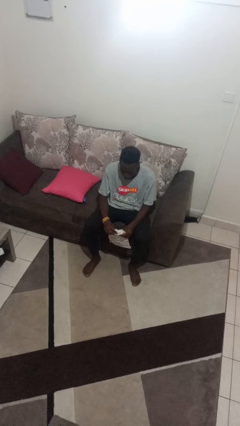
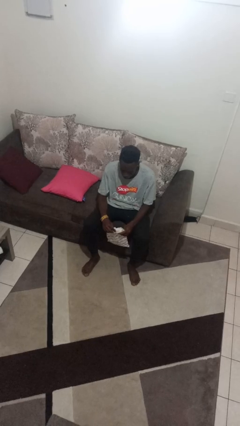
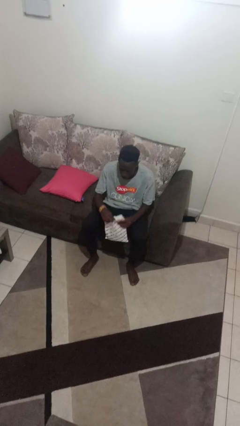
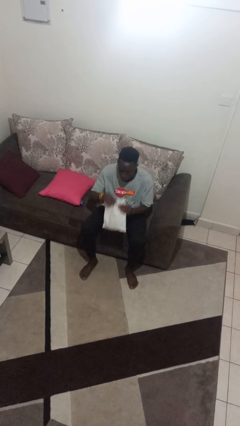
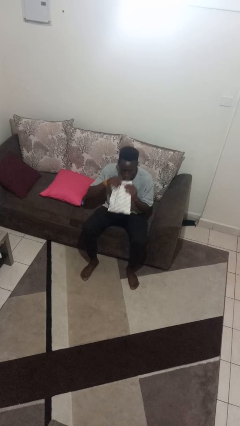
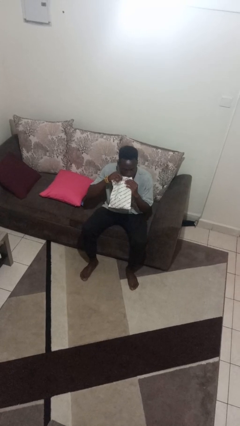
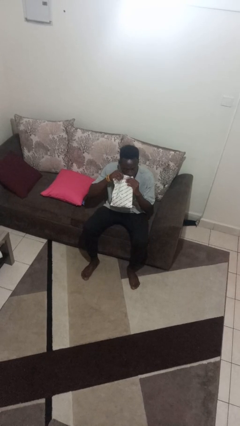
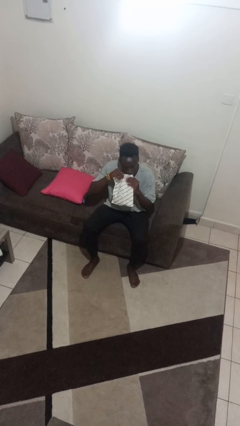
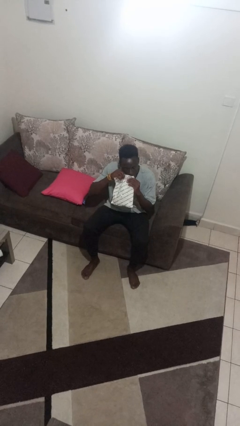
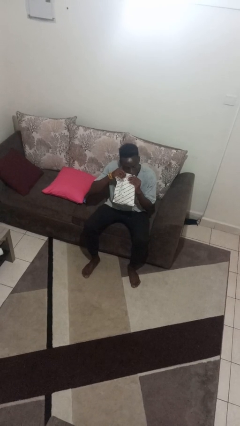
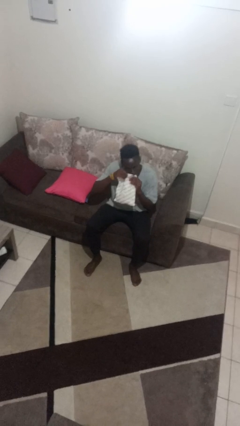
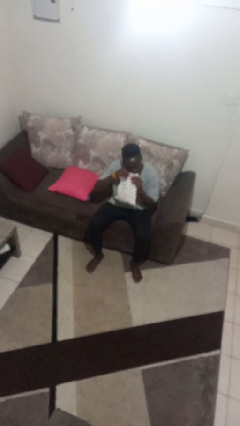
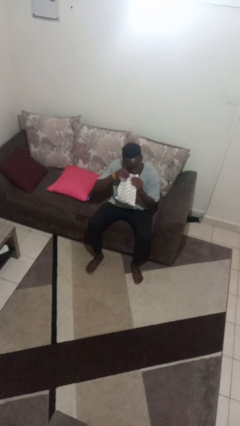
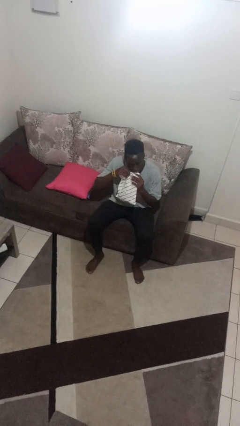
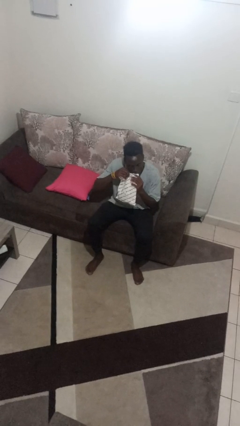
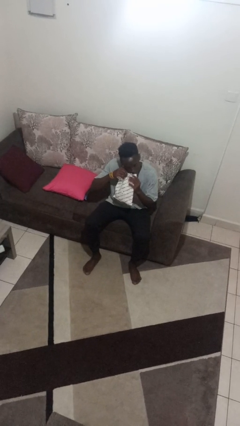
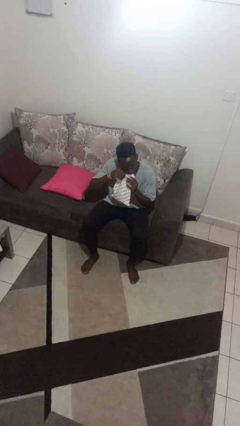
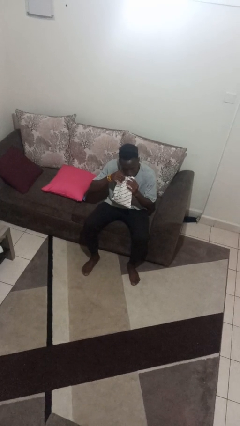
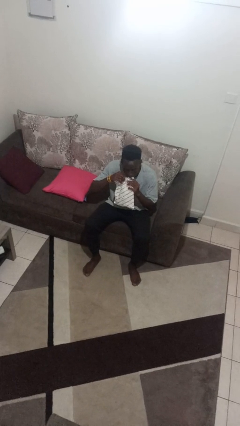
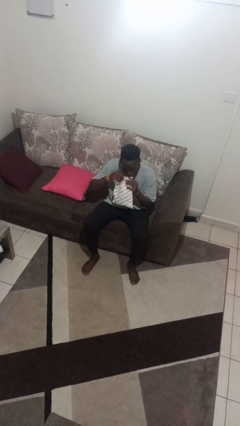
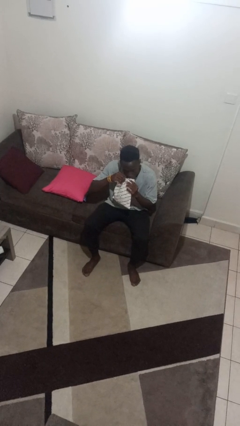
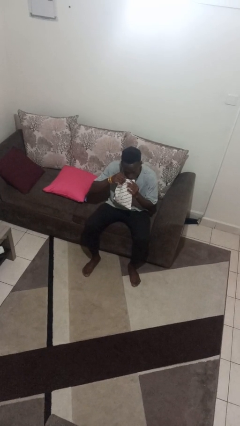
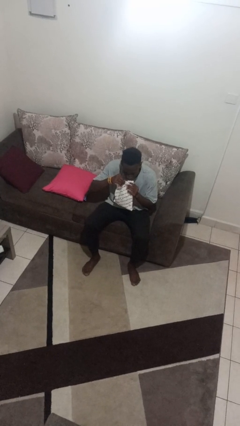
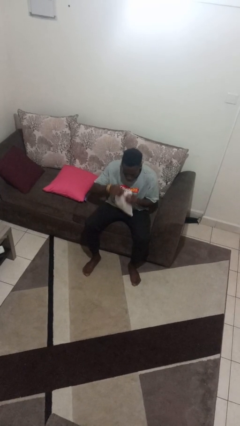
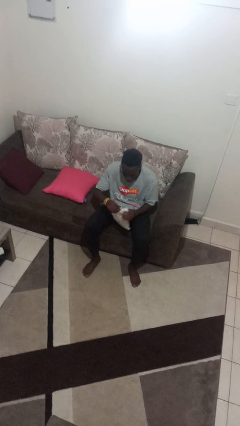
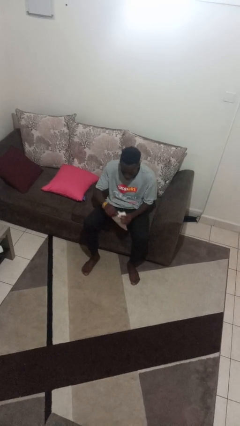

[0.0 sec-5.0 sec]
person eats snack from bag

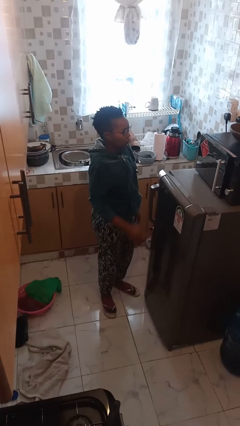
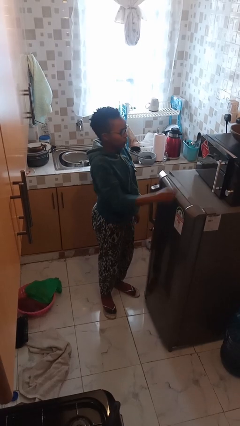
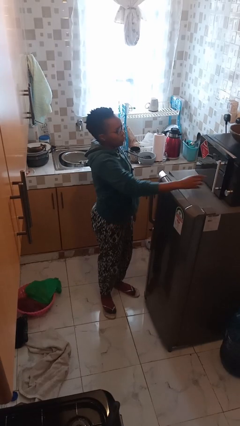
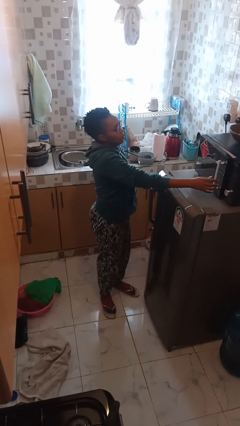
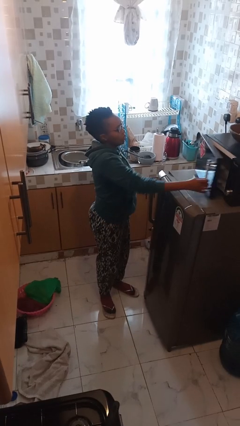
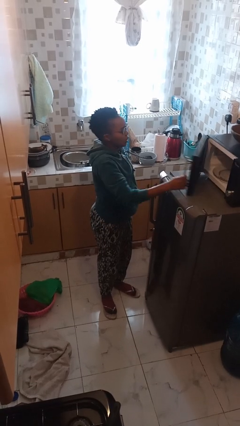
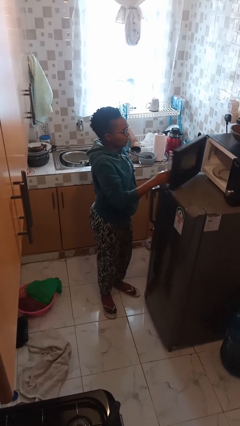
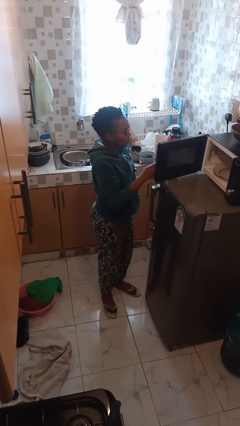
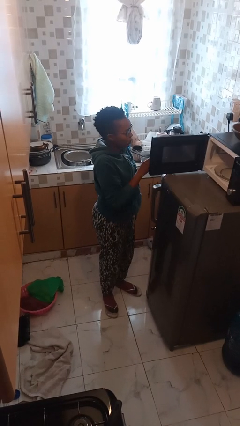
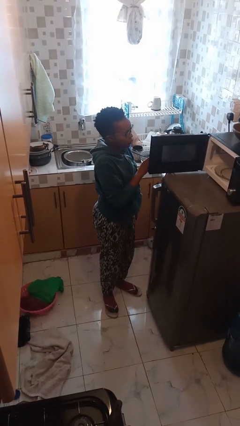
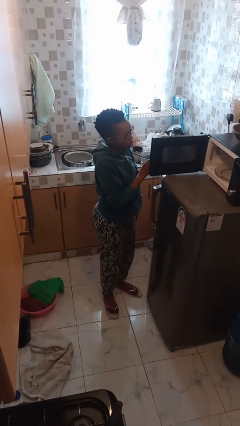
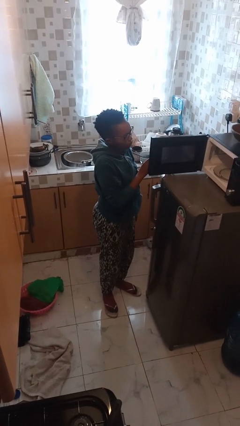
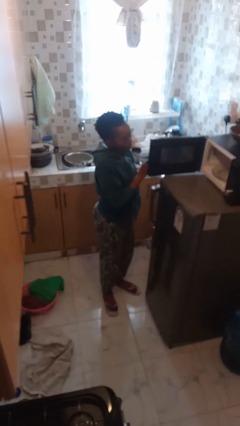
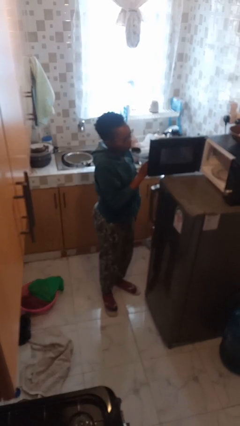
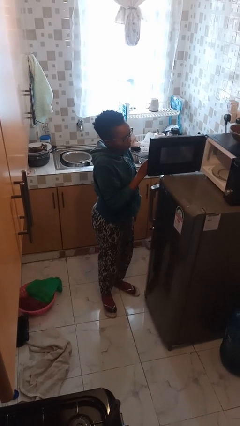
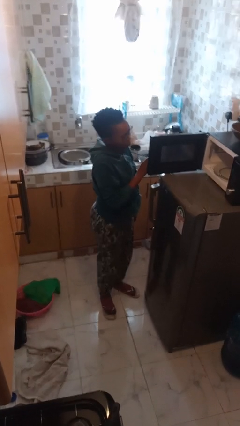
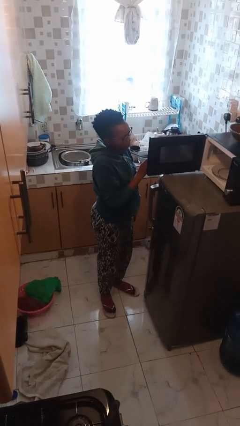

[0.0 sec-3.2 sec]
person opens microwave

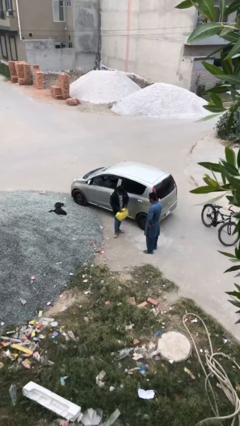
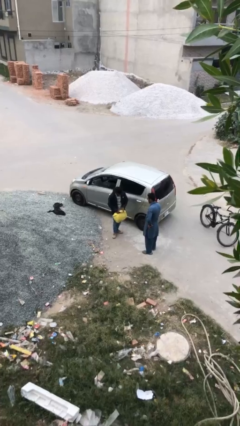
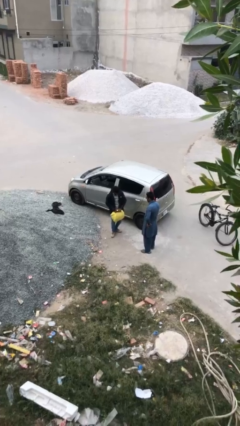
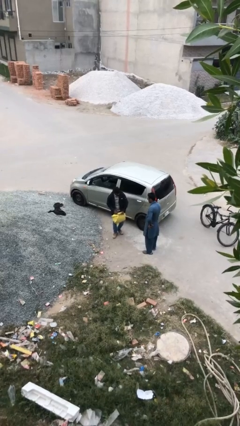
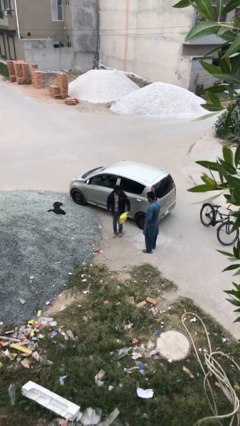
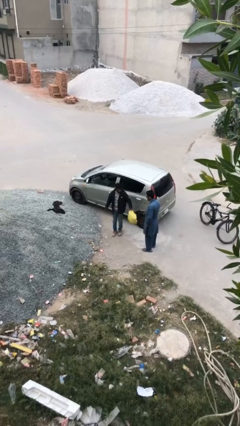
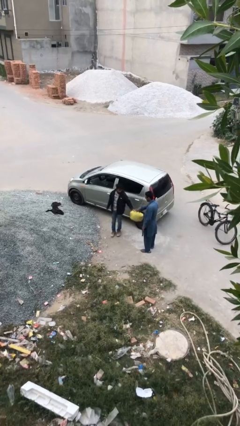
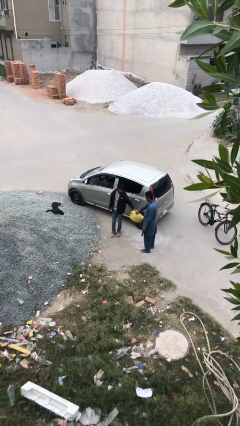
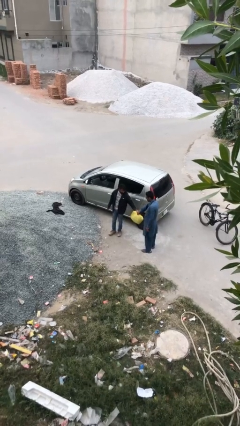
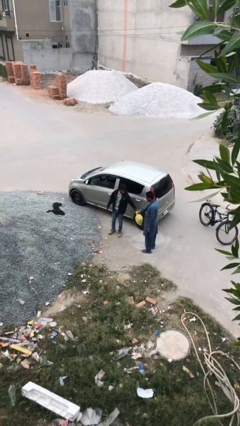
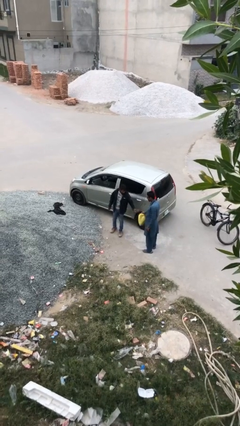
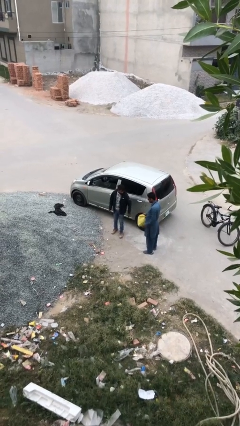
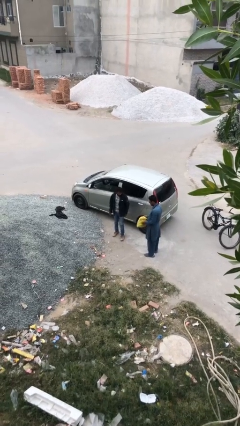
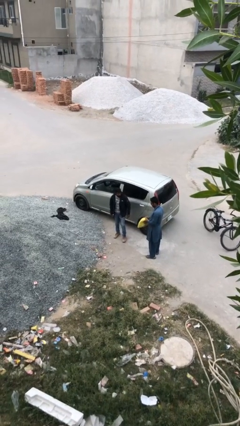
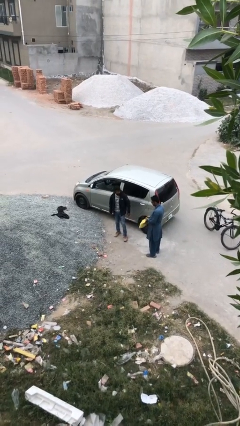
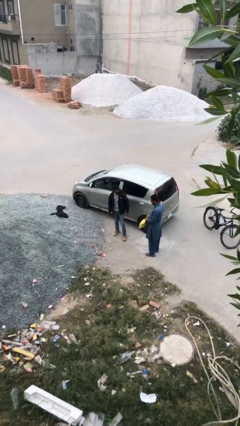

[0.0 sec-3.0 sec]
person transfers object to person

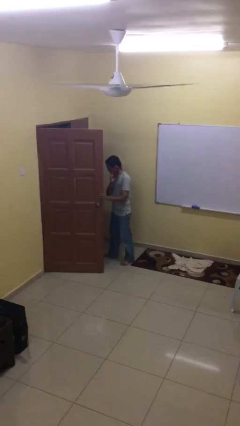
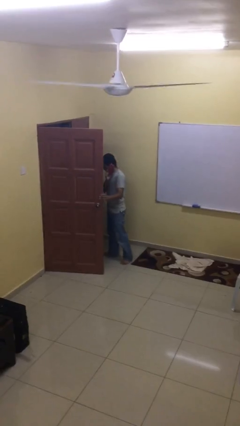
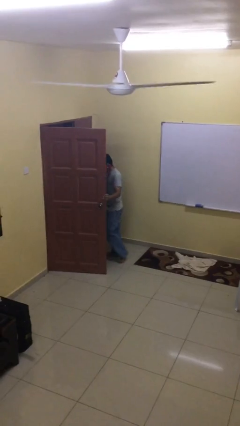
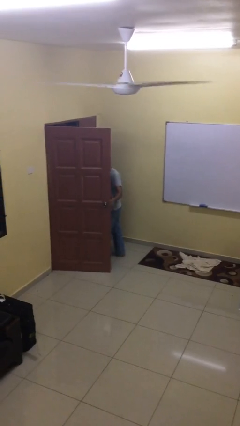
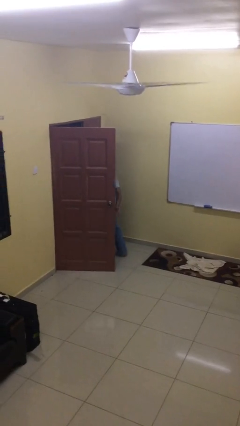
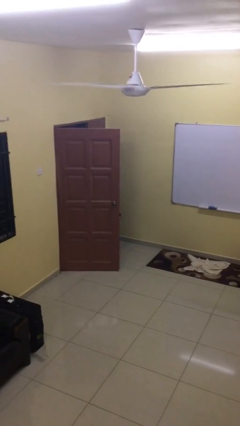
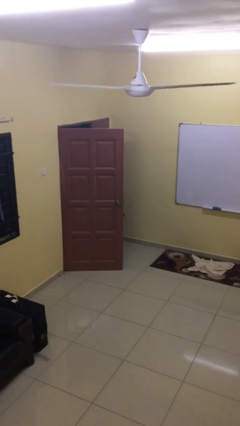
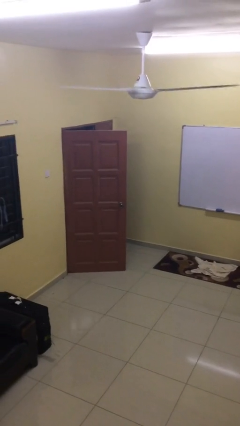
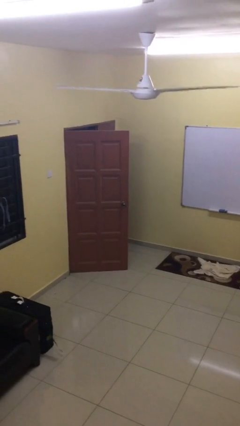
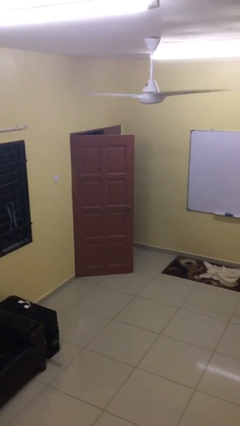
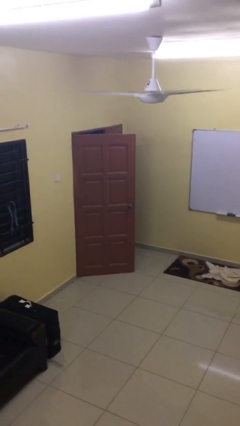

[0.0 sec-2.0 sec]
person exits scene through structure

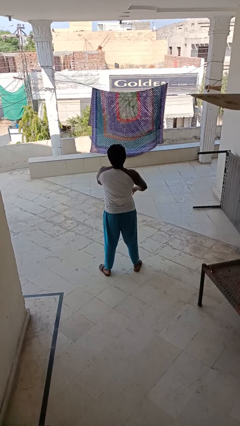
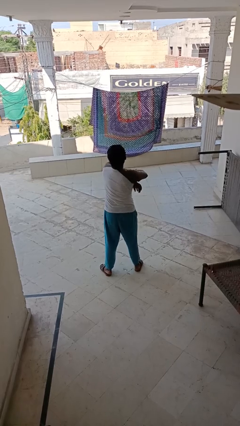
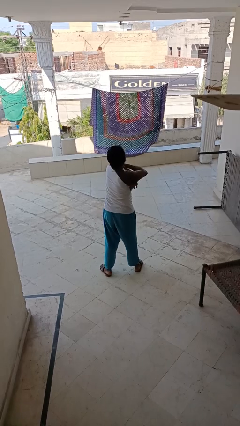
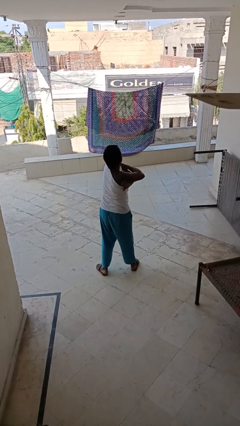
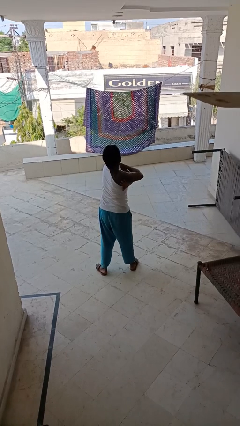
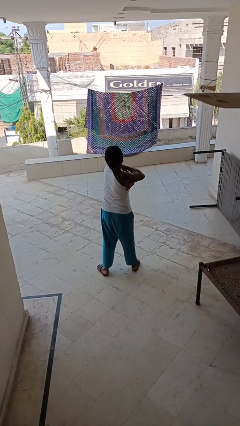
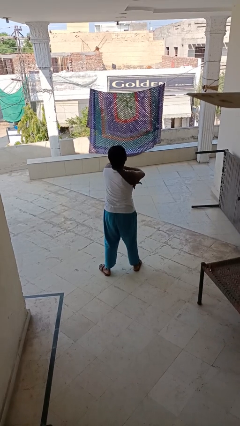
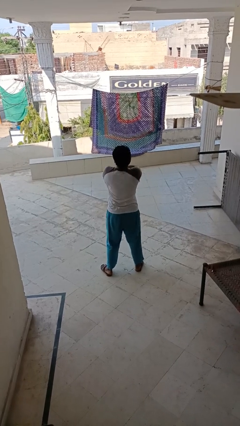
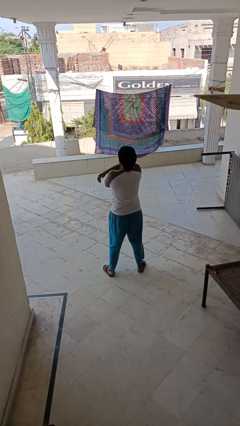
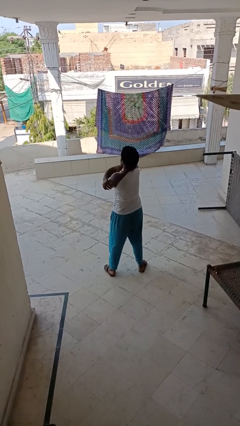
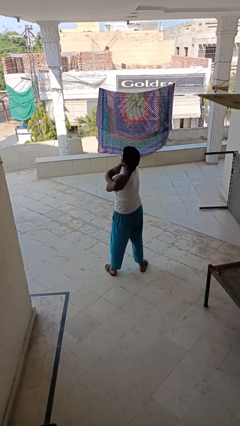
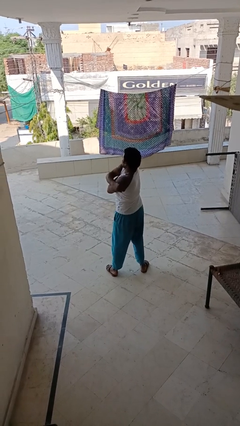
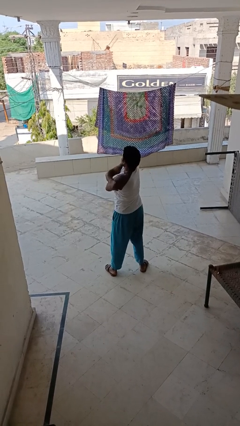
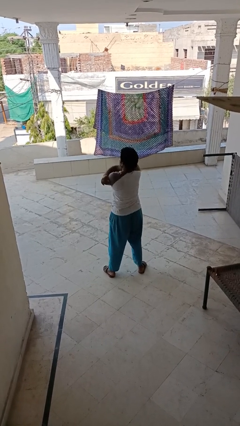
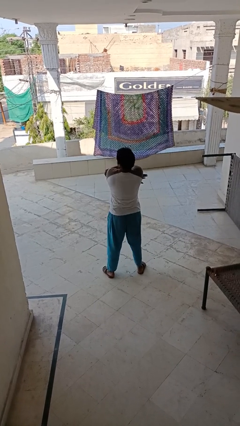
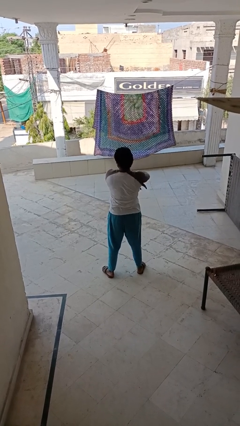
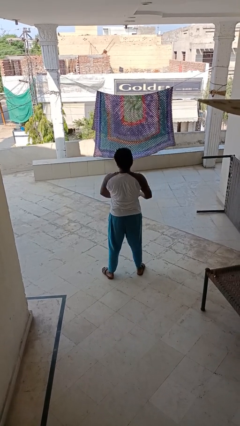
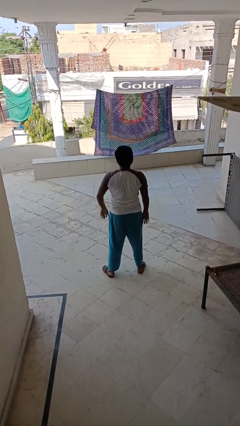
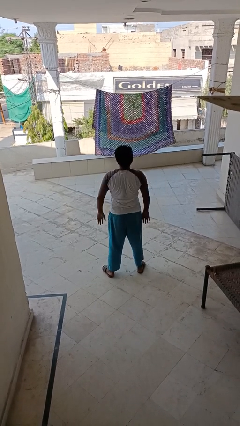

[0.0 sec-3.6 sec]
person stretches arms to side

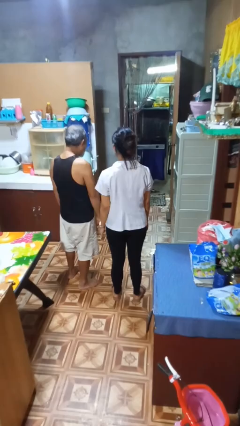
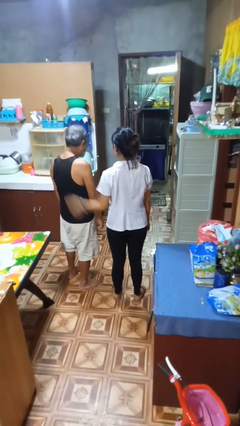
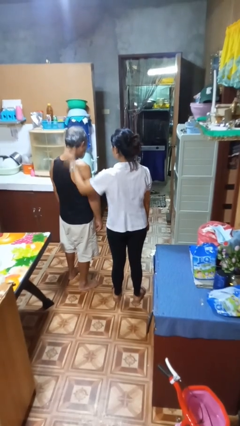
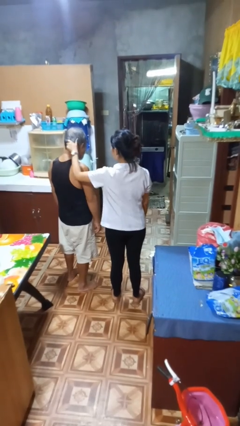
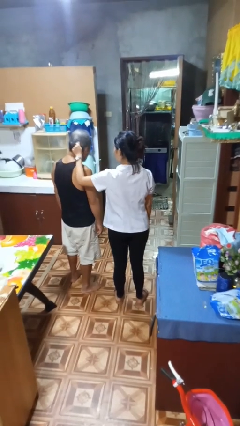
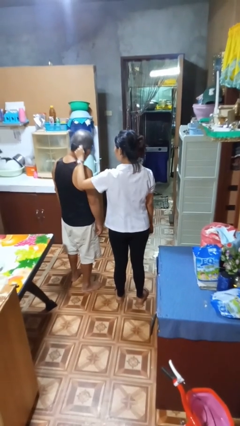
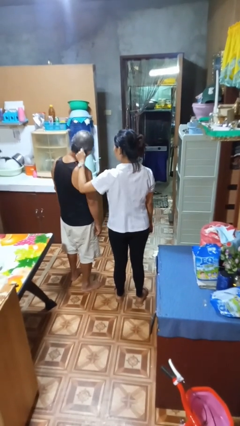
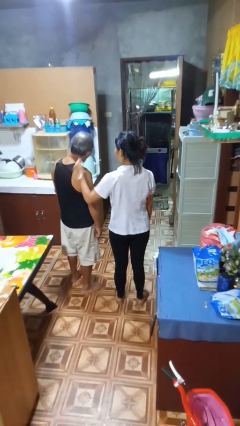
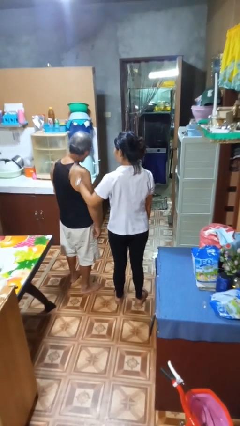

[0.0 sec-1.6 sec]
person grabs person by hair
